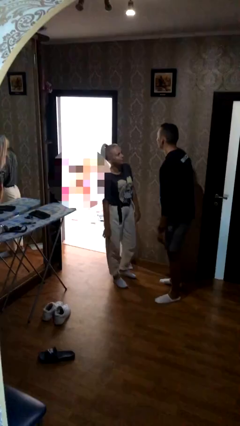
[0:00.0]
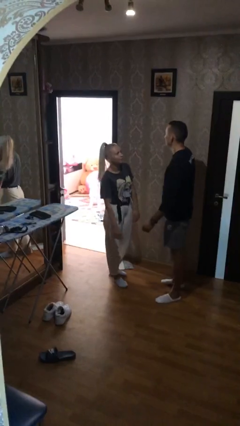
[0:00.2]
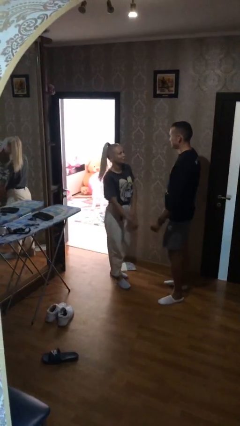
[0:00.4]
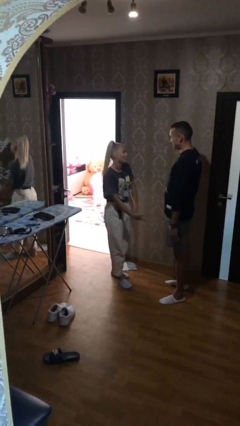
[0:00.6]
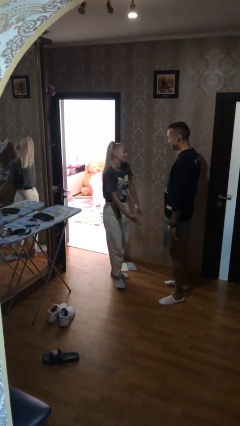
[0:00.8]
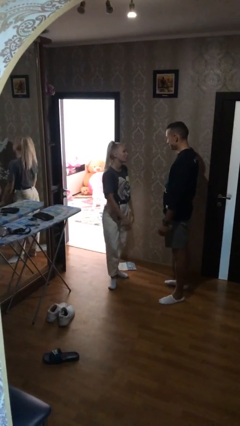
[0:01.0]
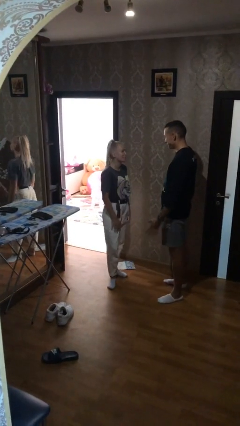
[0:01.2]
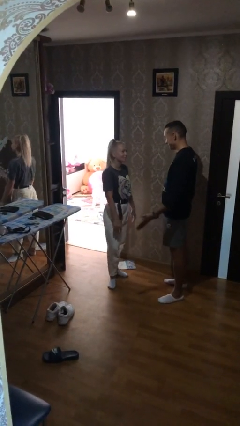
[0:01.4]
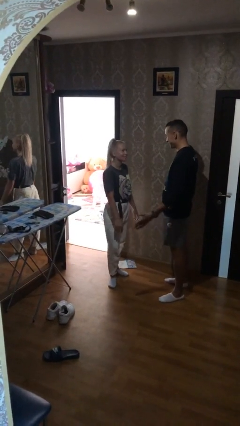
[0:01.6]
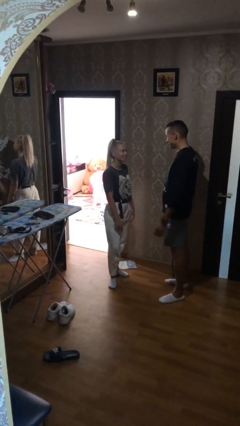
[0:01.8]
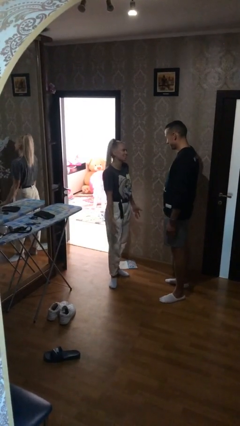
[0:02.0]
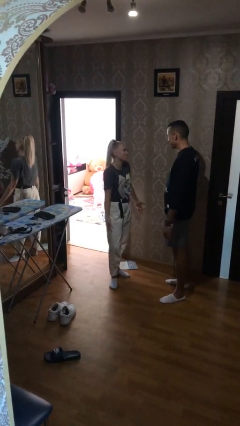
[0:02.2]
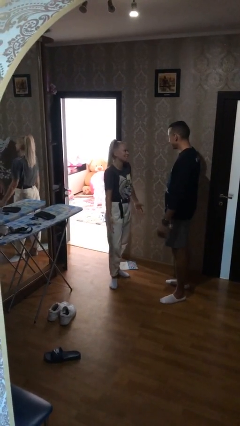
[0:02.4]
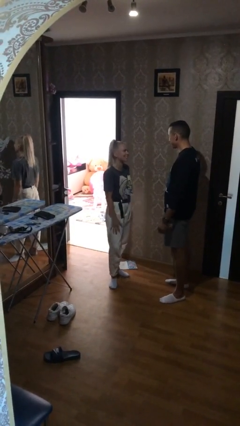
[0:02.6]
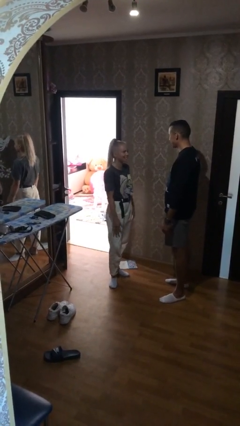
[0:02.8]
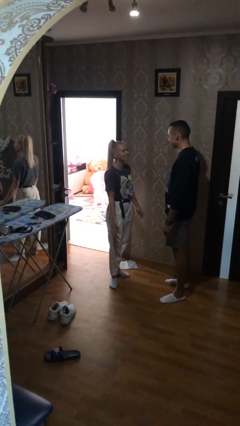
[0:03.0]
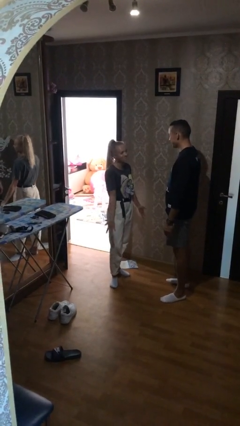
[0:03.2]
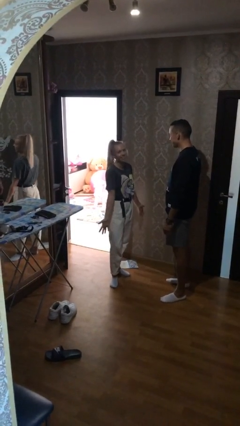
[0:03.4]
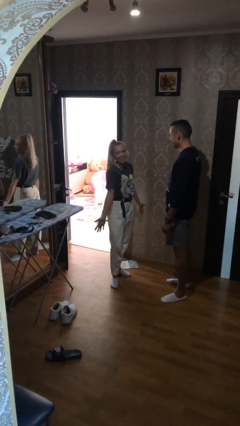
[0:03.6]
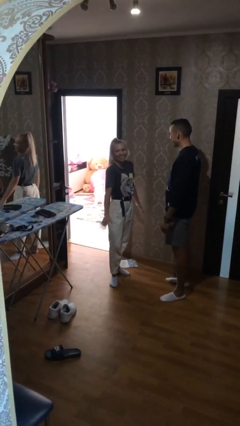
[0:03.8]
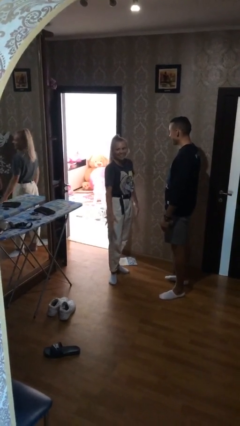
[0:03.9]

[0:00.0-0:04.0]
person talks to person

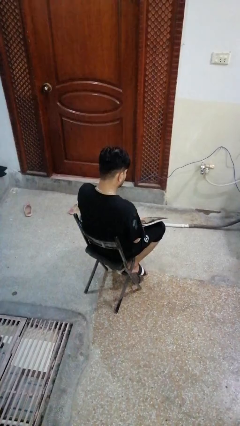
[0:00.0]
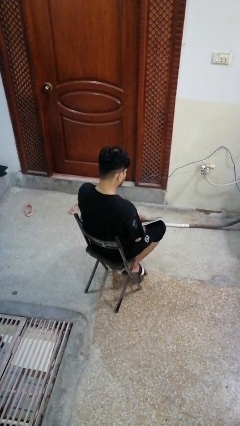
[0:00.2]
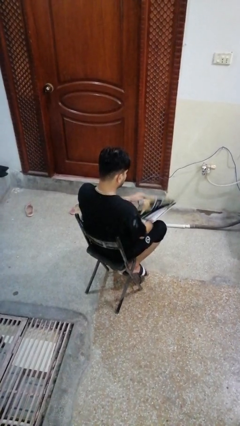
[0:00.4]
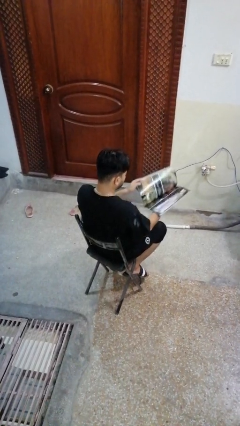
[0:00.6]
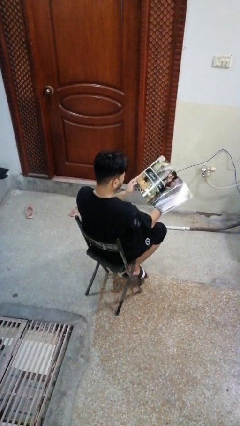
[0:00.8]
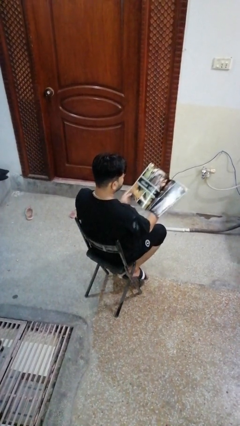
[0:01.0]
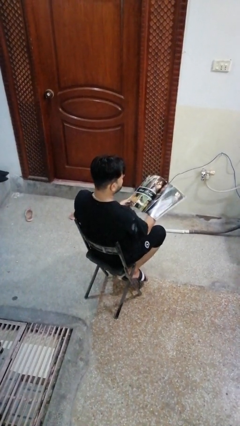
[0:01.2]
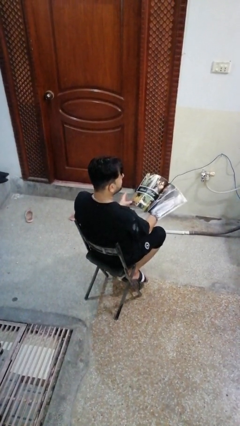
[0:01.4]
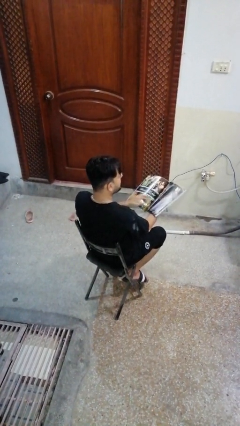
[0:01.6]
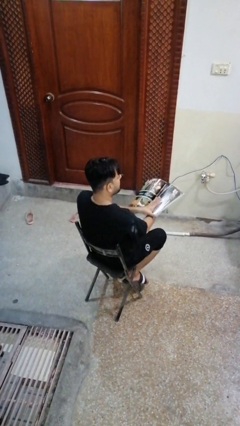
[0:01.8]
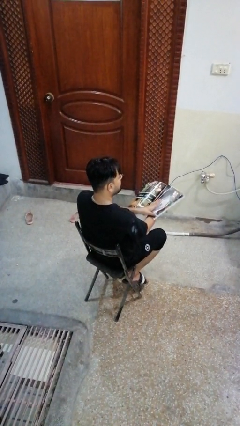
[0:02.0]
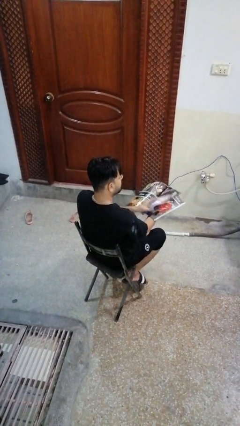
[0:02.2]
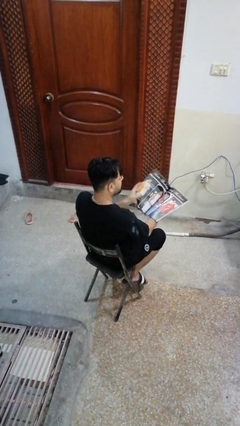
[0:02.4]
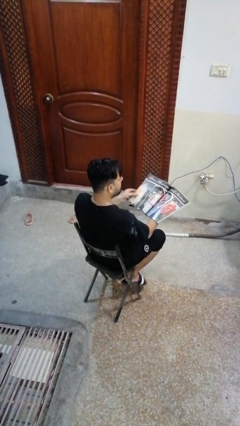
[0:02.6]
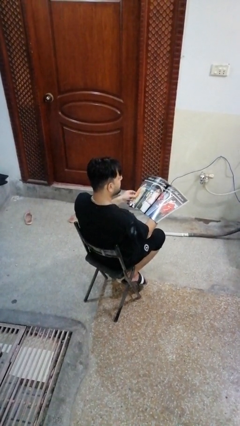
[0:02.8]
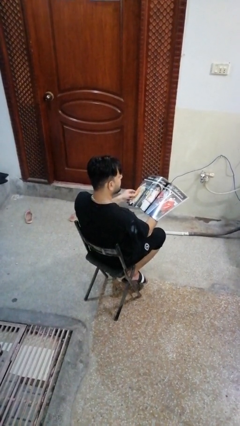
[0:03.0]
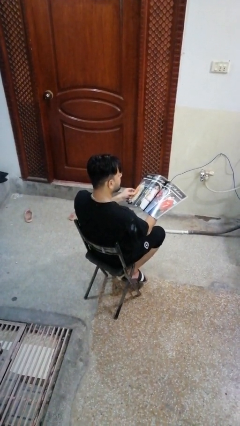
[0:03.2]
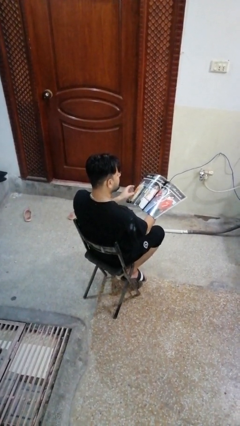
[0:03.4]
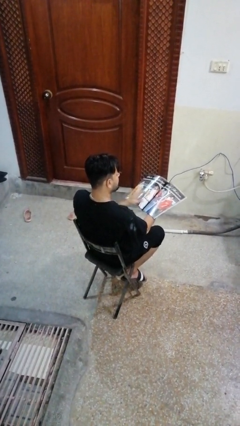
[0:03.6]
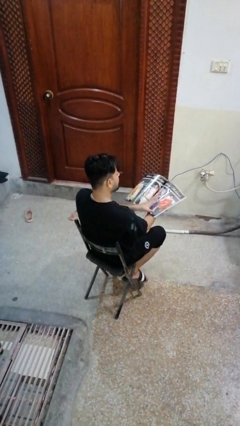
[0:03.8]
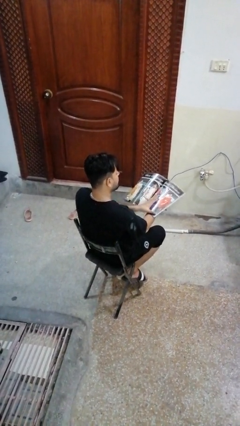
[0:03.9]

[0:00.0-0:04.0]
person reads magazine

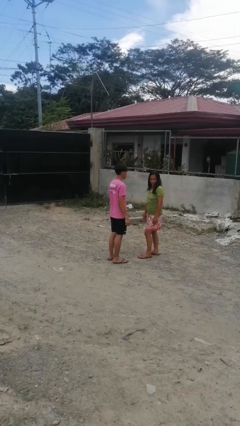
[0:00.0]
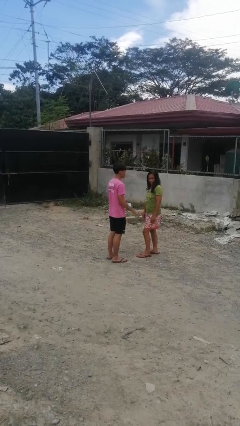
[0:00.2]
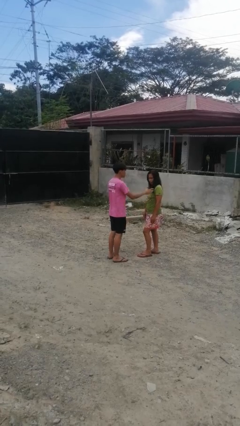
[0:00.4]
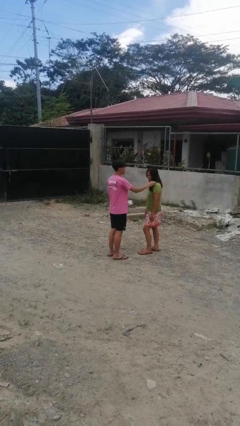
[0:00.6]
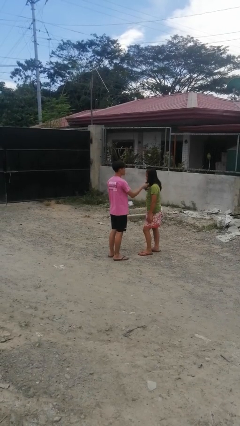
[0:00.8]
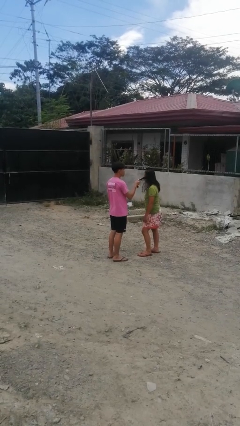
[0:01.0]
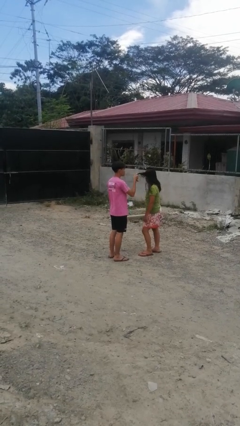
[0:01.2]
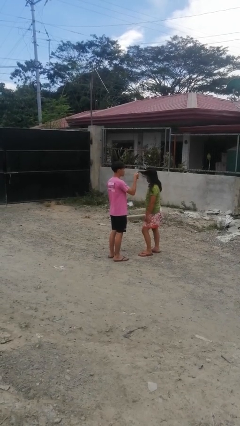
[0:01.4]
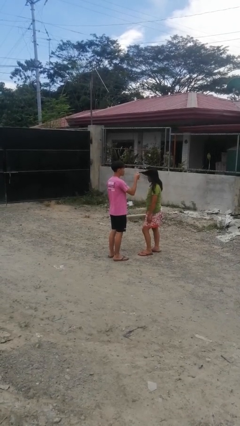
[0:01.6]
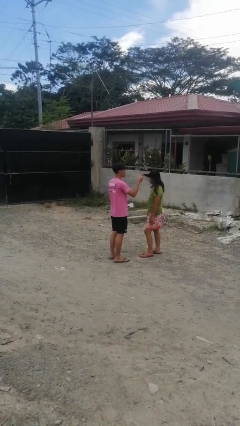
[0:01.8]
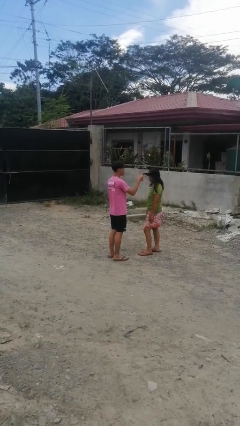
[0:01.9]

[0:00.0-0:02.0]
person grabs person by hair

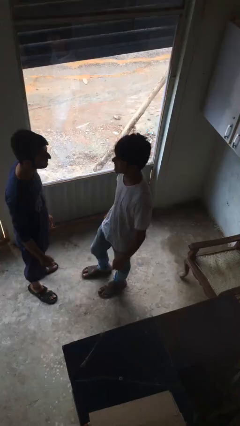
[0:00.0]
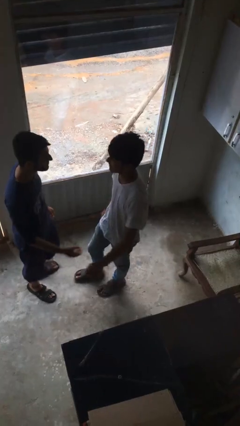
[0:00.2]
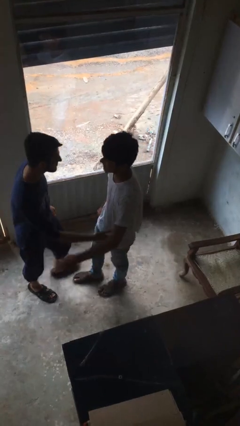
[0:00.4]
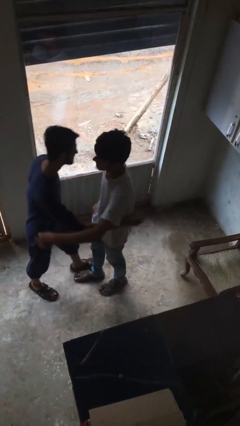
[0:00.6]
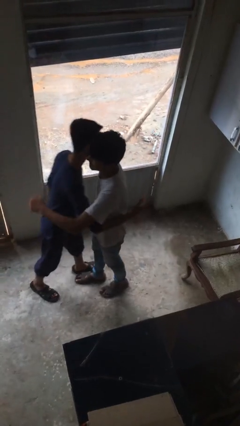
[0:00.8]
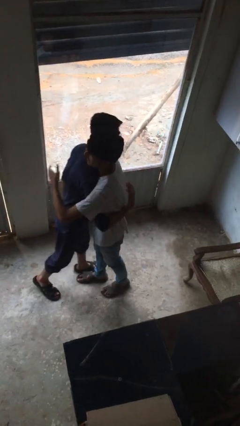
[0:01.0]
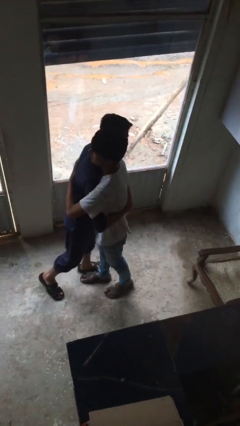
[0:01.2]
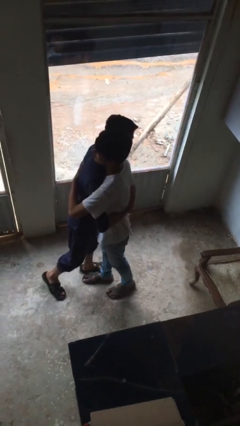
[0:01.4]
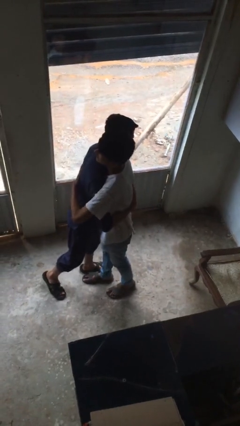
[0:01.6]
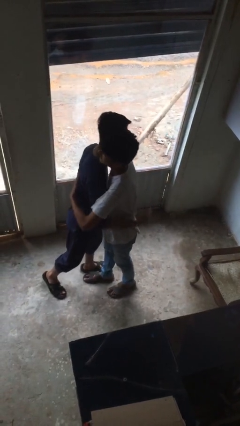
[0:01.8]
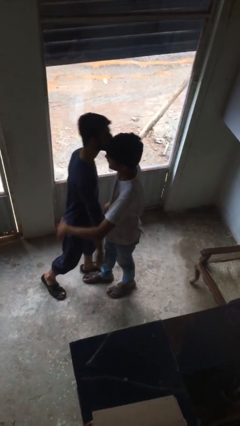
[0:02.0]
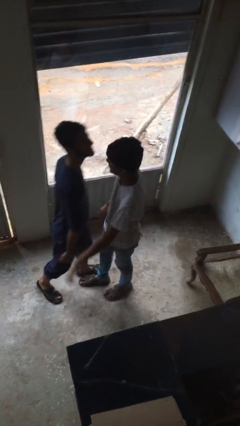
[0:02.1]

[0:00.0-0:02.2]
person embraces person

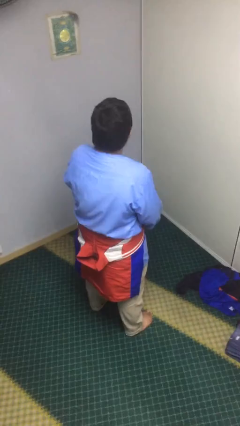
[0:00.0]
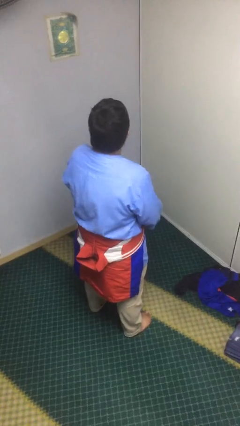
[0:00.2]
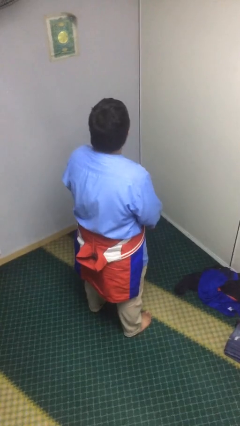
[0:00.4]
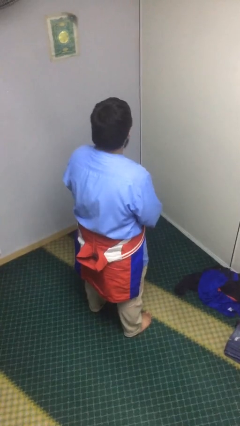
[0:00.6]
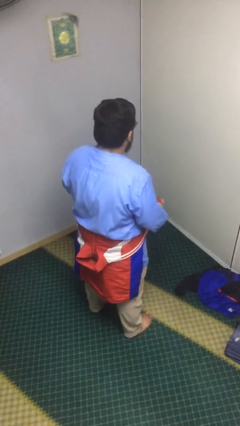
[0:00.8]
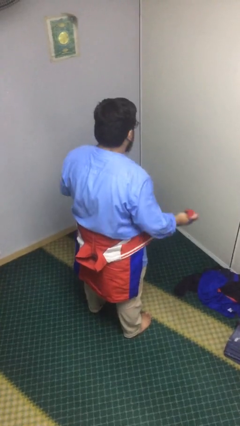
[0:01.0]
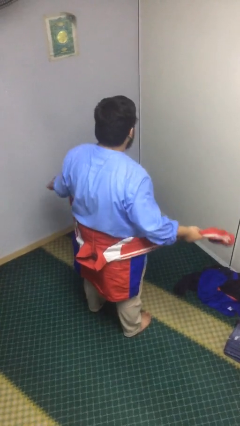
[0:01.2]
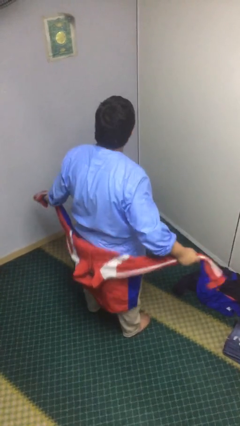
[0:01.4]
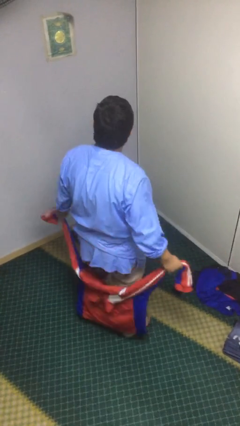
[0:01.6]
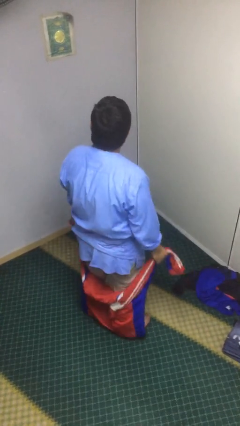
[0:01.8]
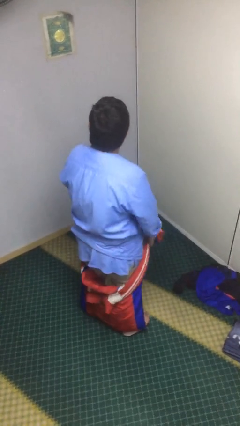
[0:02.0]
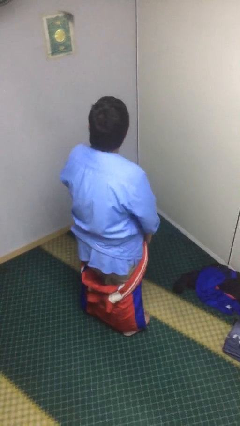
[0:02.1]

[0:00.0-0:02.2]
person unties jacket around waist

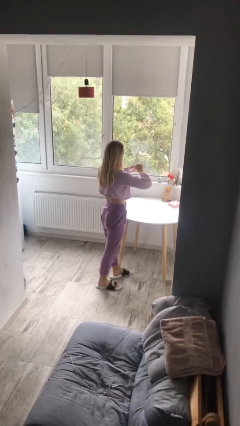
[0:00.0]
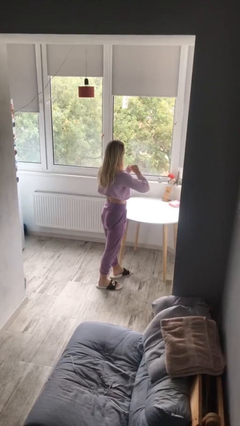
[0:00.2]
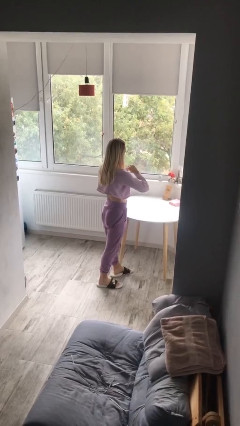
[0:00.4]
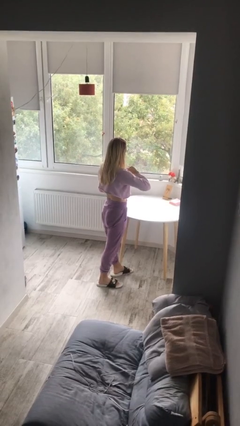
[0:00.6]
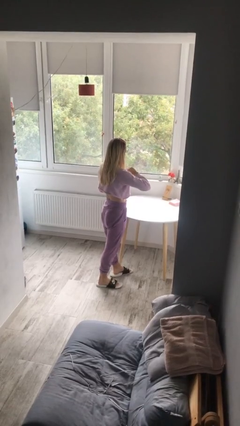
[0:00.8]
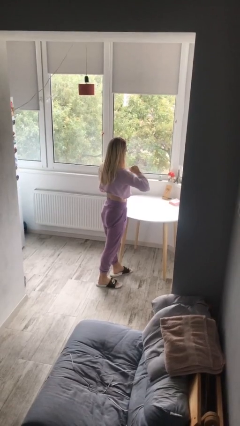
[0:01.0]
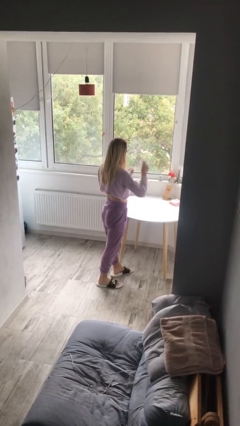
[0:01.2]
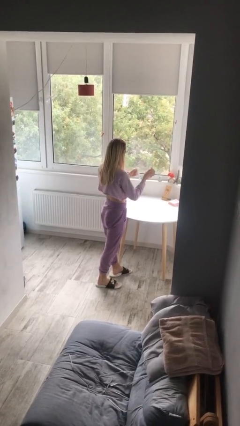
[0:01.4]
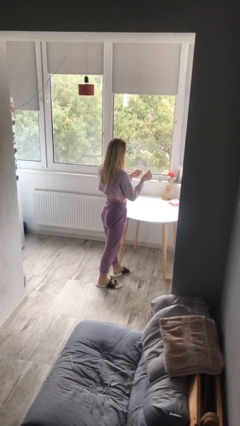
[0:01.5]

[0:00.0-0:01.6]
person tears paper

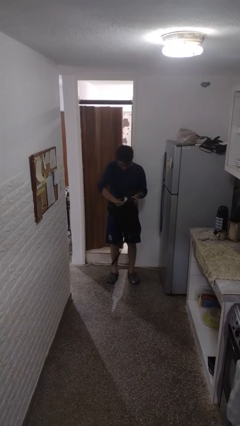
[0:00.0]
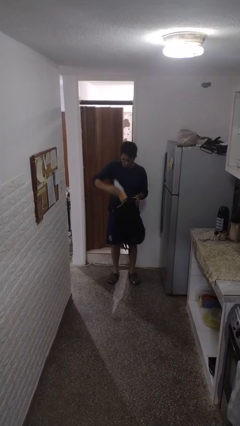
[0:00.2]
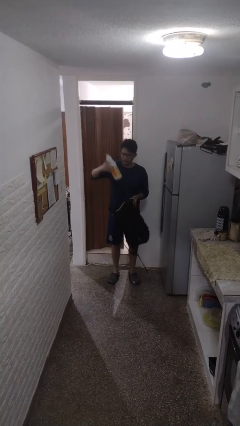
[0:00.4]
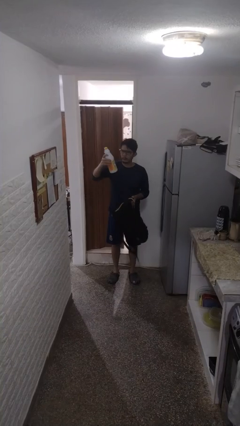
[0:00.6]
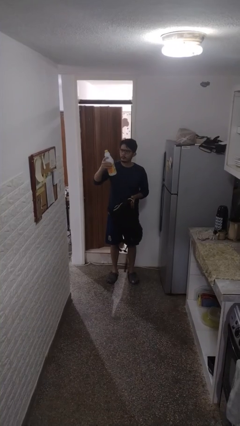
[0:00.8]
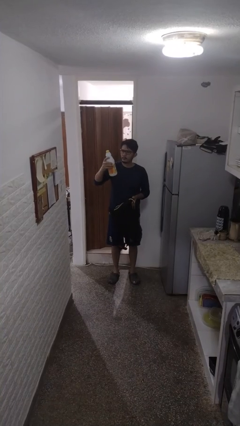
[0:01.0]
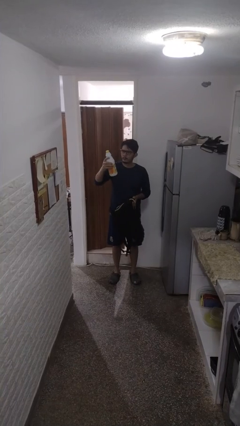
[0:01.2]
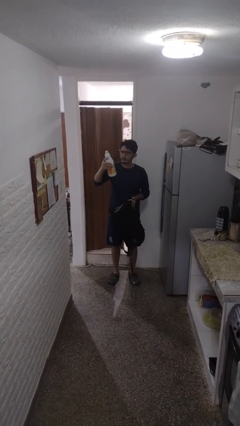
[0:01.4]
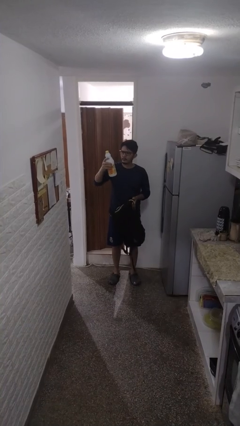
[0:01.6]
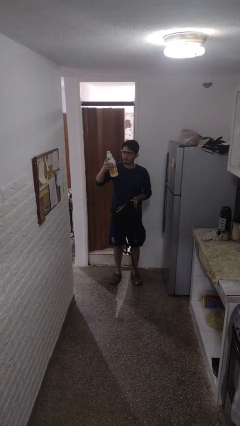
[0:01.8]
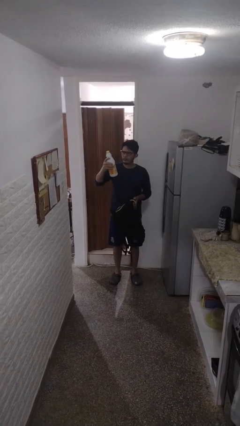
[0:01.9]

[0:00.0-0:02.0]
person takes object from backpack
